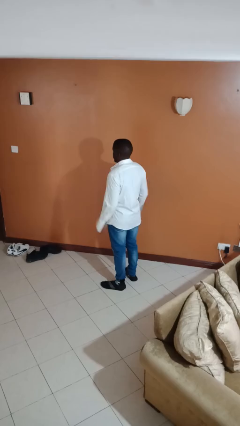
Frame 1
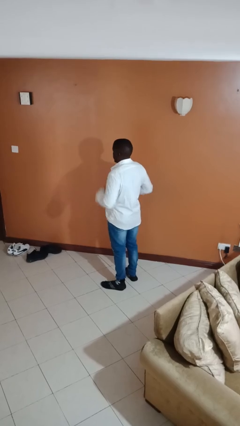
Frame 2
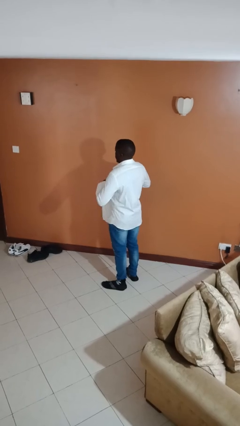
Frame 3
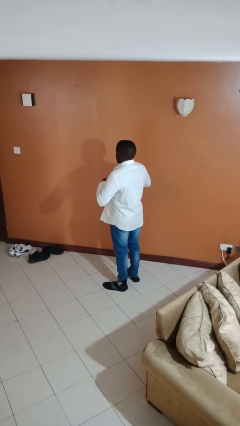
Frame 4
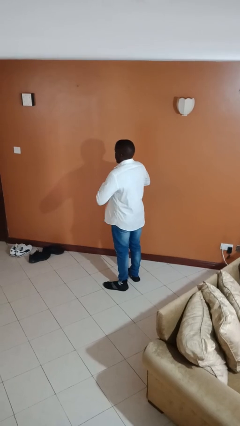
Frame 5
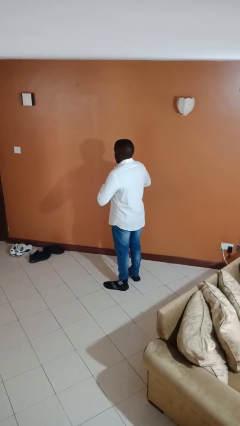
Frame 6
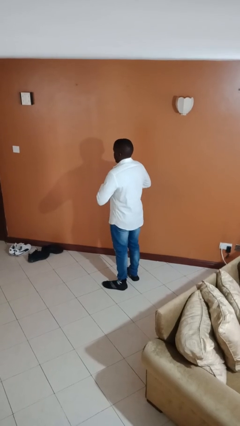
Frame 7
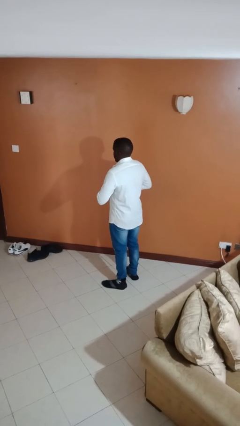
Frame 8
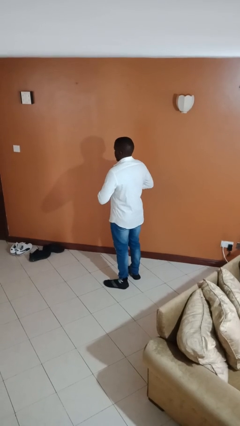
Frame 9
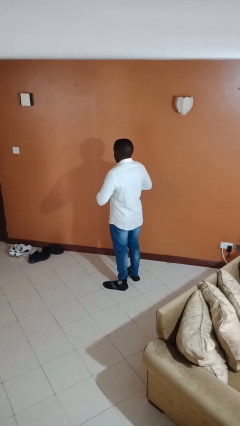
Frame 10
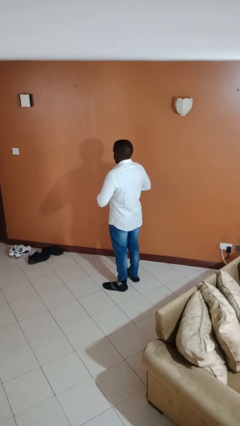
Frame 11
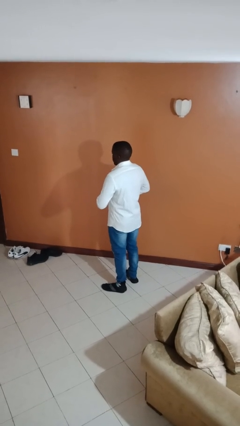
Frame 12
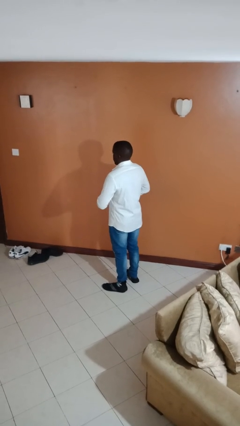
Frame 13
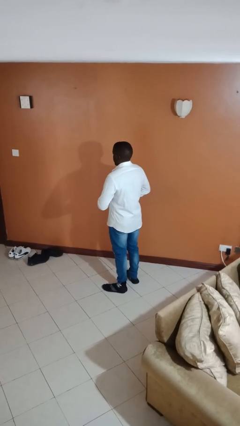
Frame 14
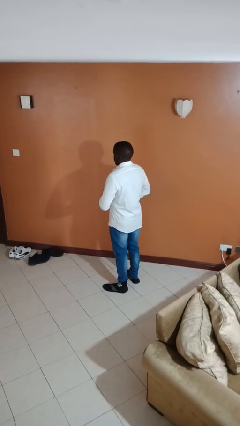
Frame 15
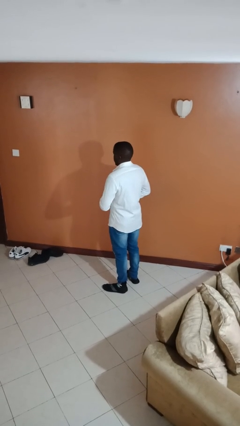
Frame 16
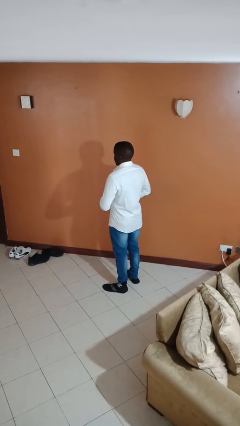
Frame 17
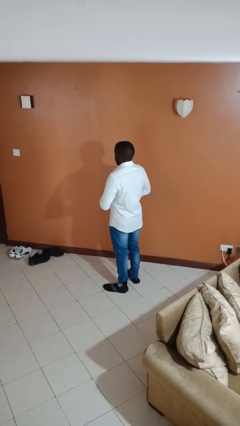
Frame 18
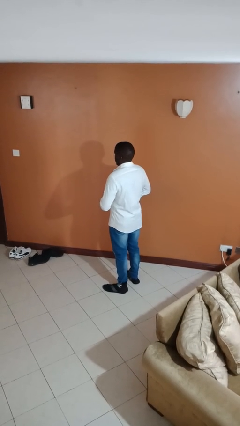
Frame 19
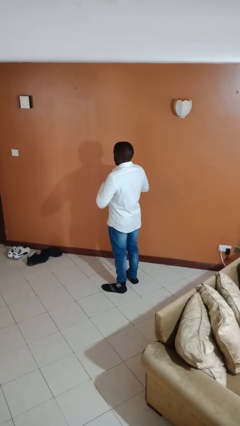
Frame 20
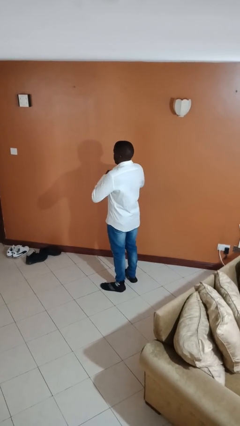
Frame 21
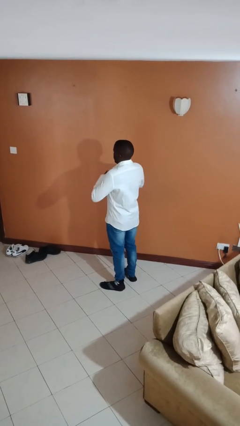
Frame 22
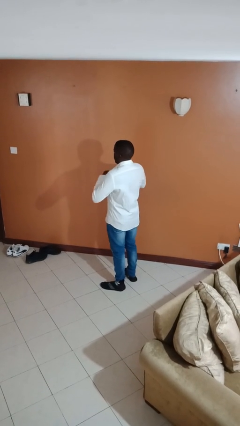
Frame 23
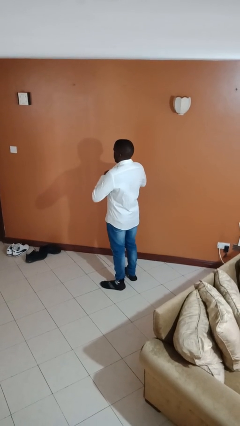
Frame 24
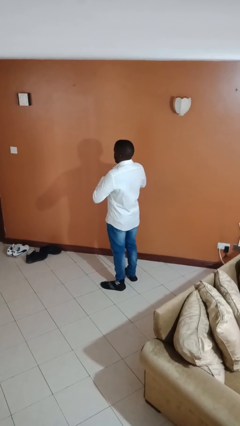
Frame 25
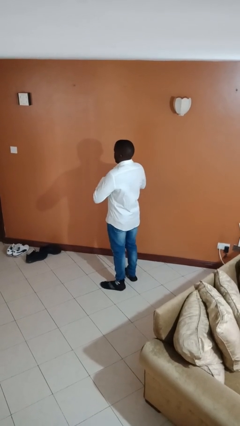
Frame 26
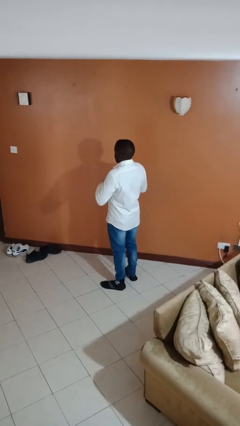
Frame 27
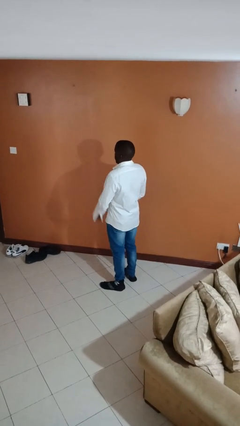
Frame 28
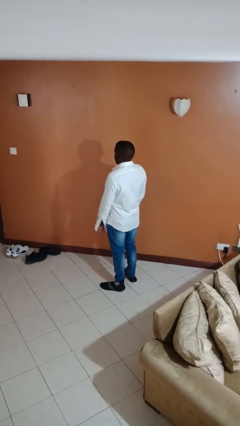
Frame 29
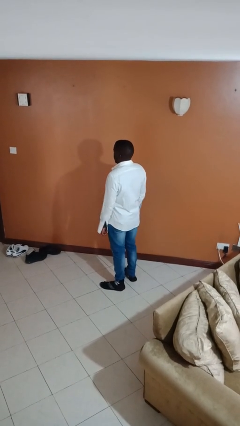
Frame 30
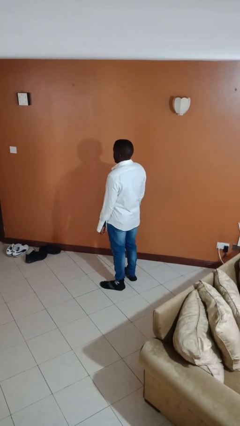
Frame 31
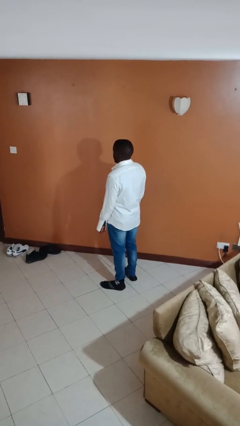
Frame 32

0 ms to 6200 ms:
person buttons shirt

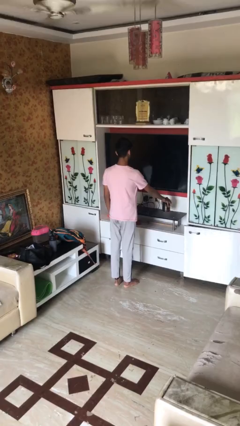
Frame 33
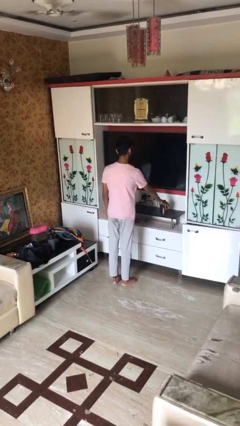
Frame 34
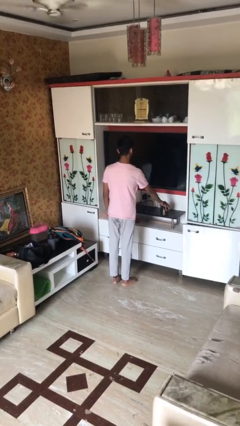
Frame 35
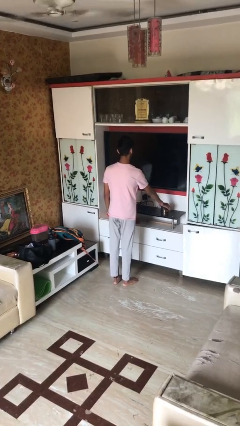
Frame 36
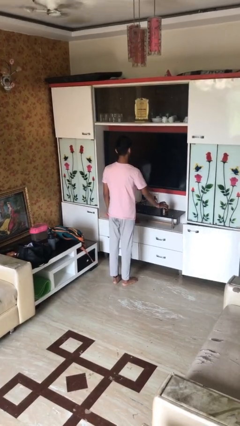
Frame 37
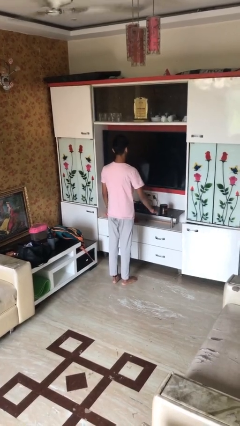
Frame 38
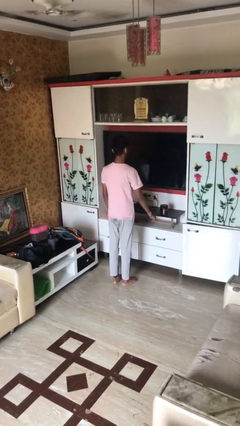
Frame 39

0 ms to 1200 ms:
person puts down object on countertop

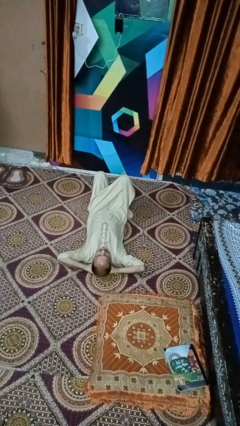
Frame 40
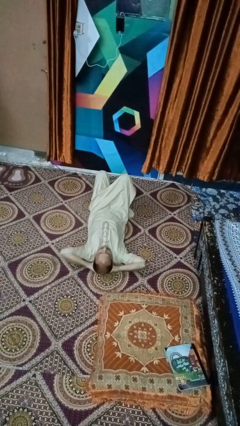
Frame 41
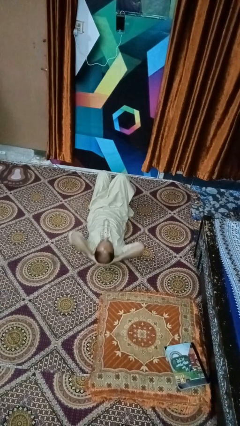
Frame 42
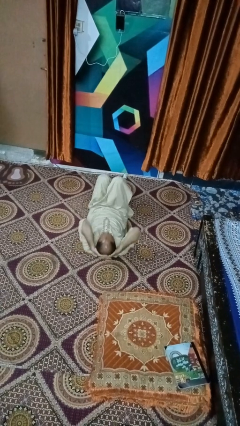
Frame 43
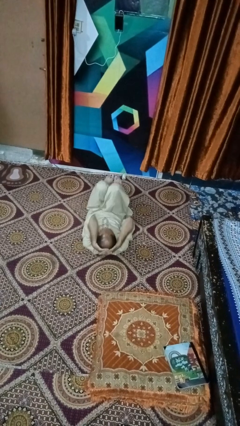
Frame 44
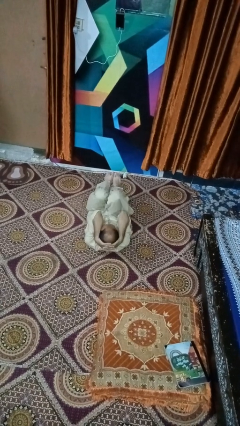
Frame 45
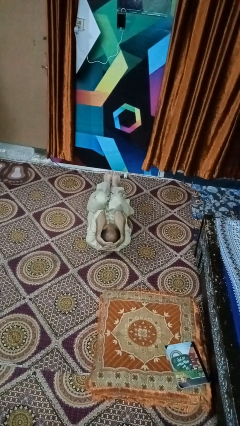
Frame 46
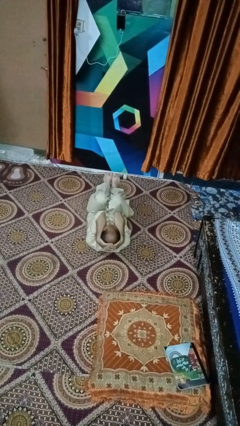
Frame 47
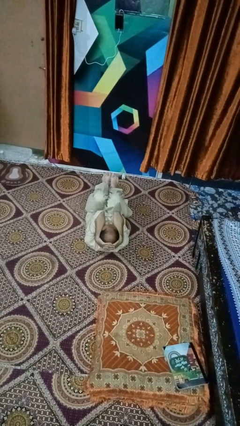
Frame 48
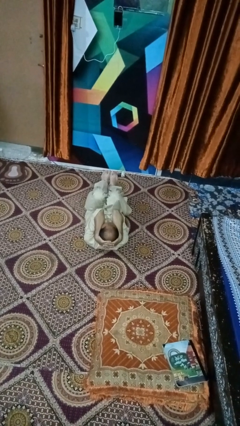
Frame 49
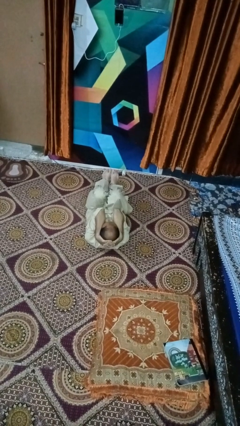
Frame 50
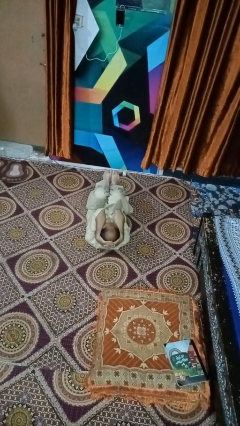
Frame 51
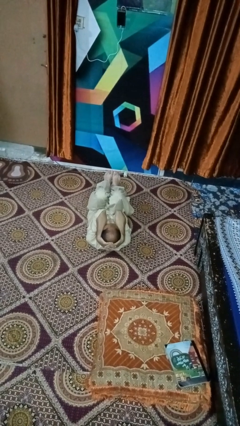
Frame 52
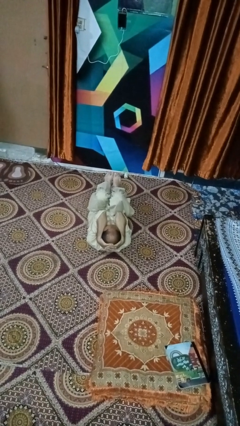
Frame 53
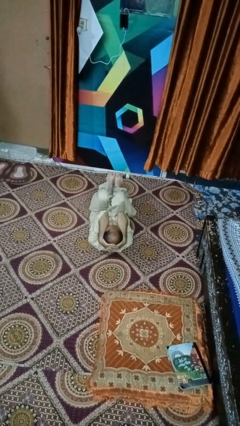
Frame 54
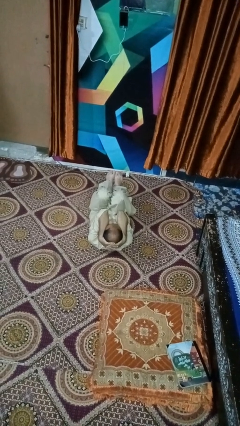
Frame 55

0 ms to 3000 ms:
person exercises with situp

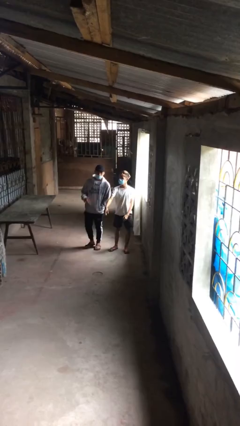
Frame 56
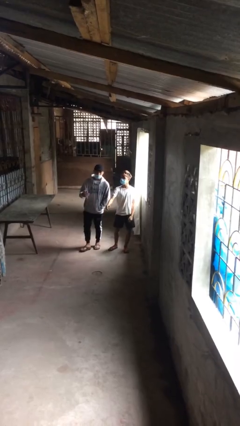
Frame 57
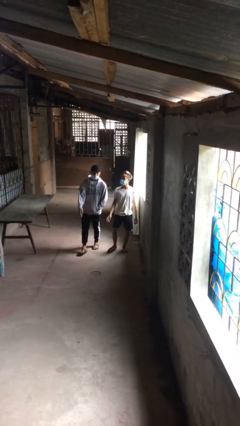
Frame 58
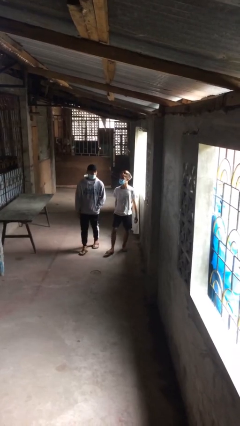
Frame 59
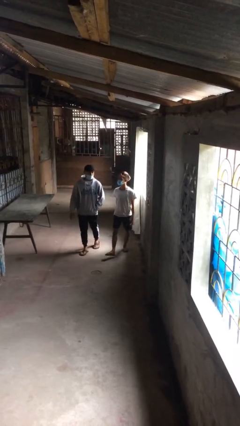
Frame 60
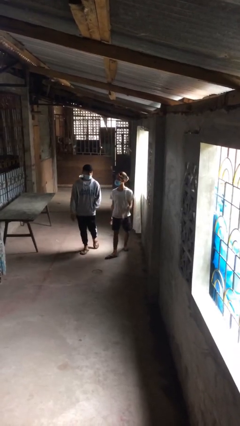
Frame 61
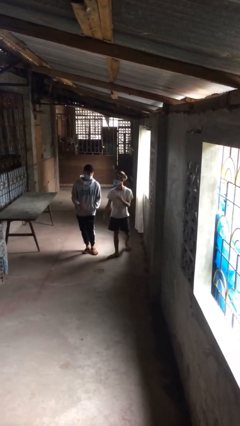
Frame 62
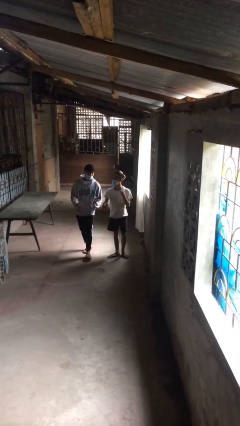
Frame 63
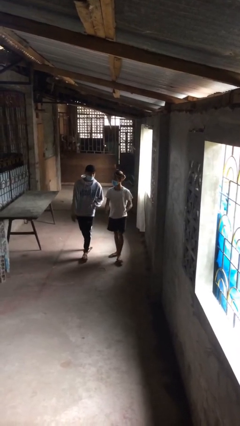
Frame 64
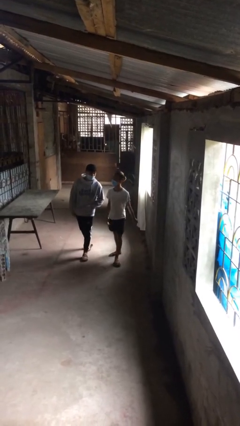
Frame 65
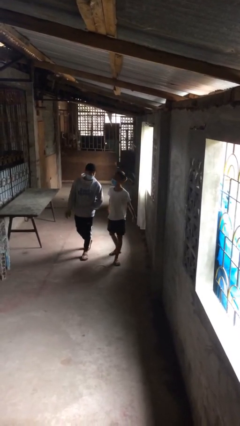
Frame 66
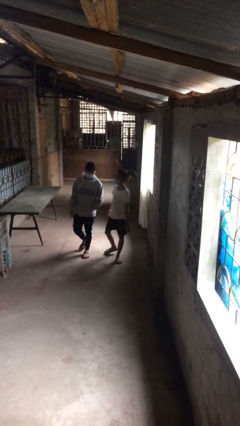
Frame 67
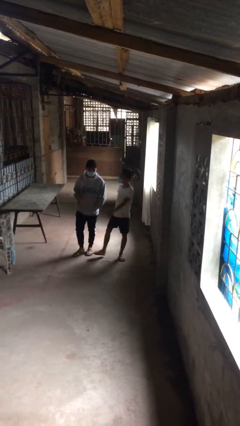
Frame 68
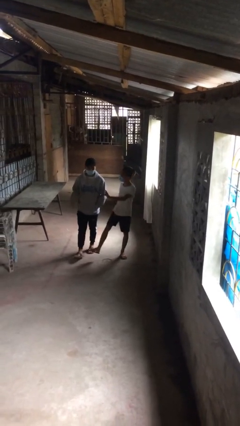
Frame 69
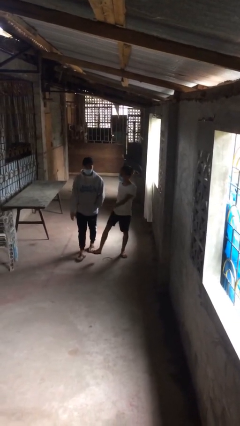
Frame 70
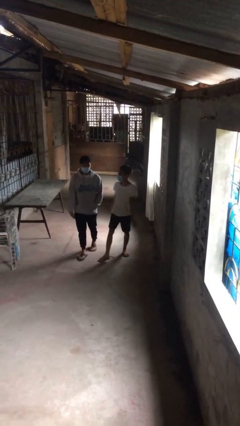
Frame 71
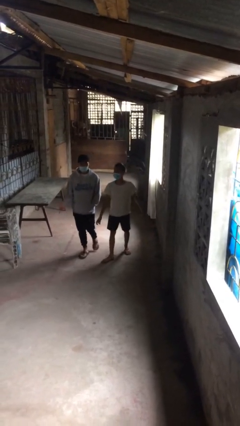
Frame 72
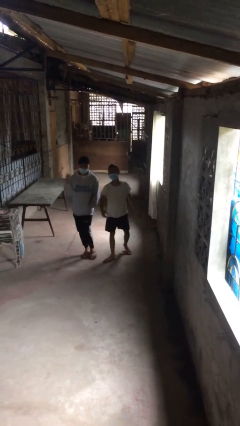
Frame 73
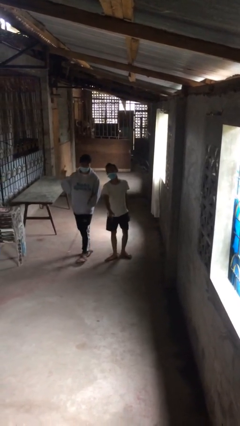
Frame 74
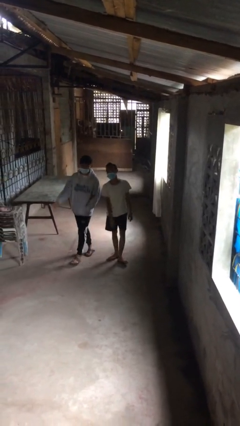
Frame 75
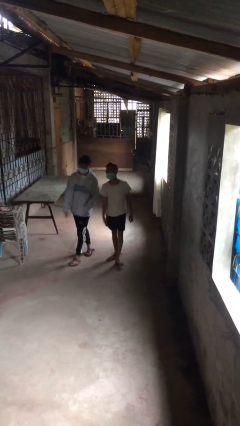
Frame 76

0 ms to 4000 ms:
person talks to person

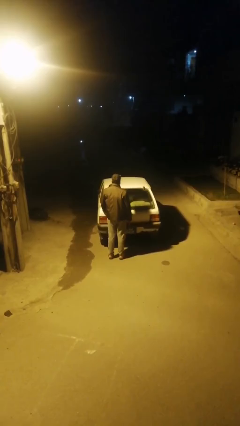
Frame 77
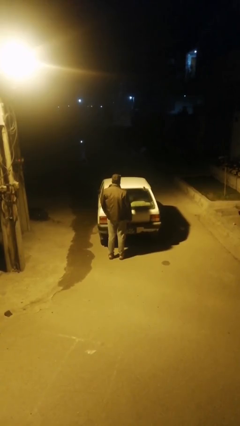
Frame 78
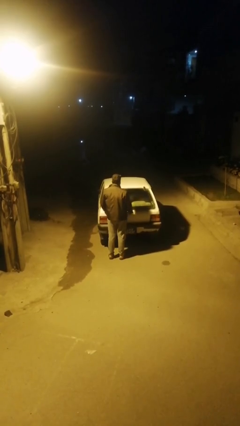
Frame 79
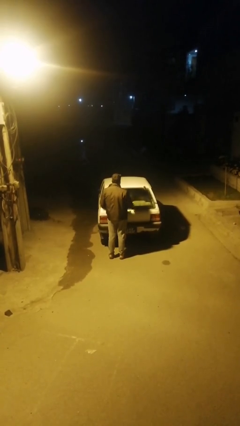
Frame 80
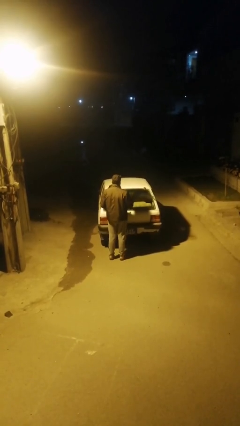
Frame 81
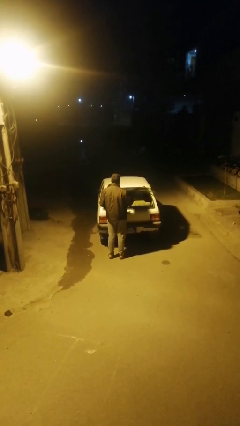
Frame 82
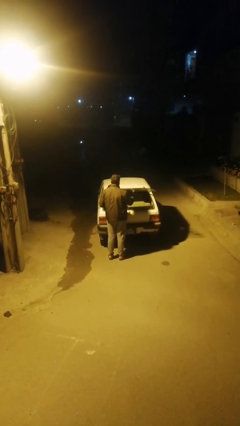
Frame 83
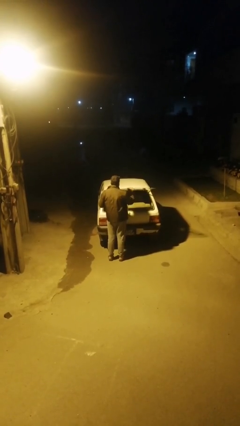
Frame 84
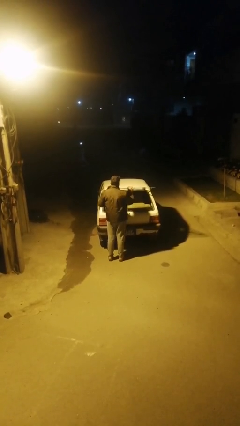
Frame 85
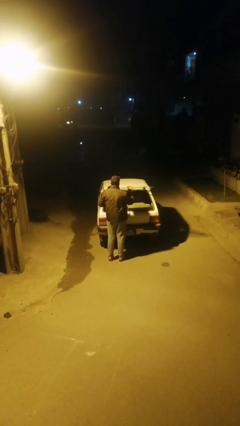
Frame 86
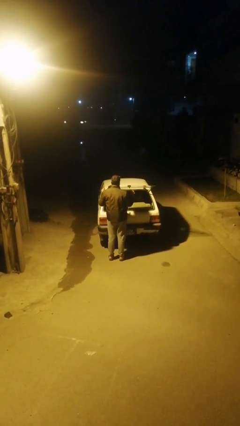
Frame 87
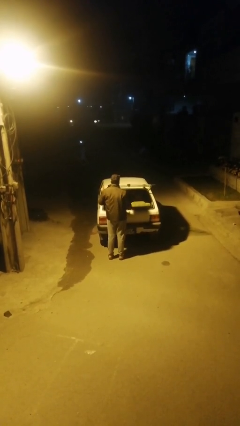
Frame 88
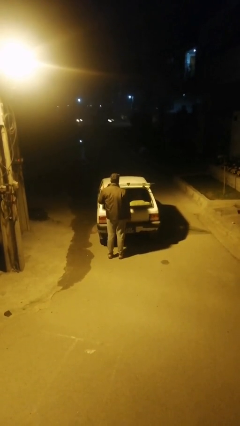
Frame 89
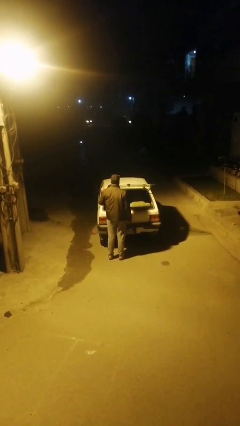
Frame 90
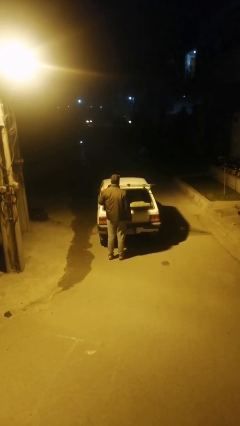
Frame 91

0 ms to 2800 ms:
person opens car trunk

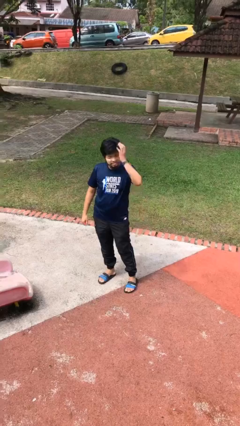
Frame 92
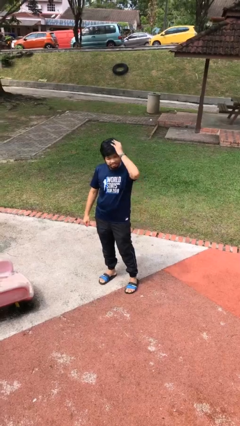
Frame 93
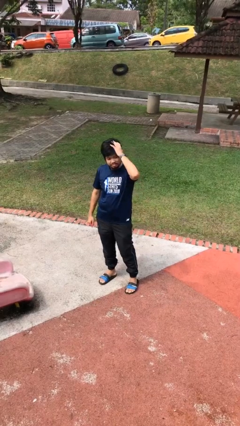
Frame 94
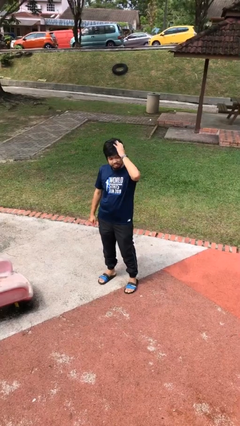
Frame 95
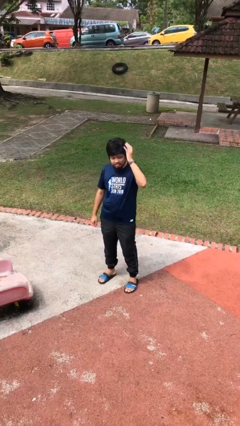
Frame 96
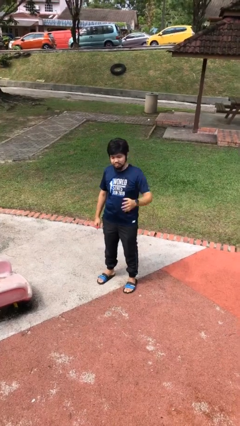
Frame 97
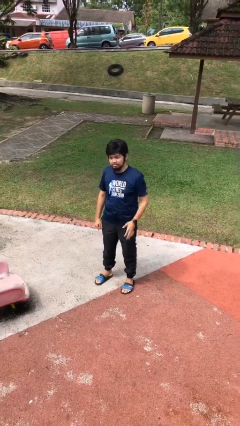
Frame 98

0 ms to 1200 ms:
person pats head
